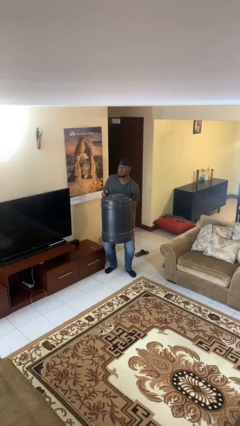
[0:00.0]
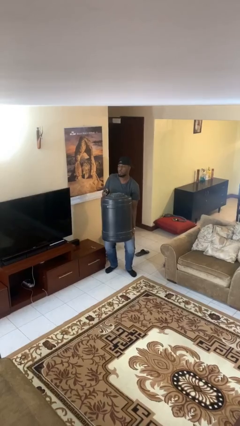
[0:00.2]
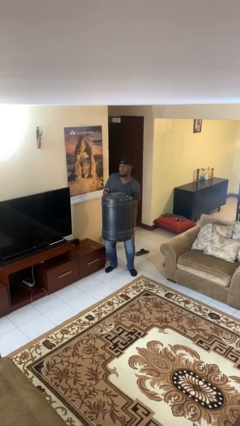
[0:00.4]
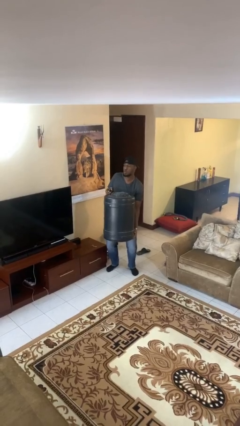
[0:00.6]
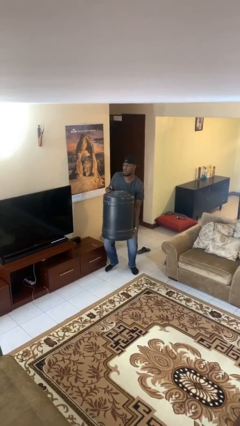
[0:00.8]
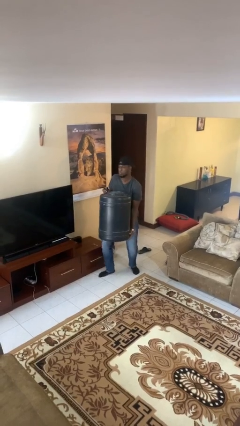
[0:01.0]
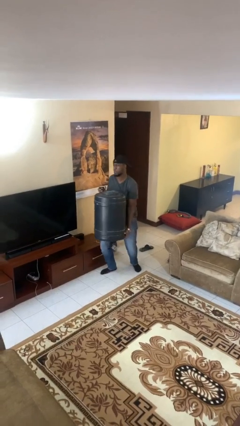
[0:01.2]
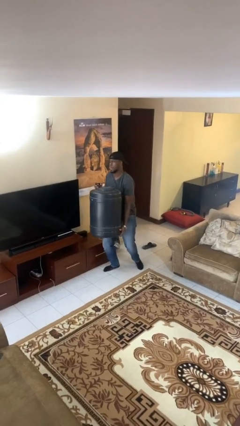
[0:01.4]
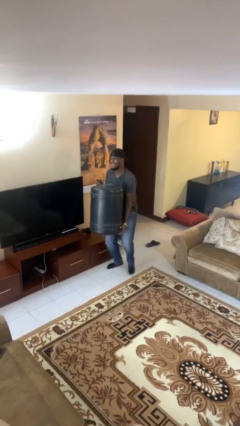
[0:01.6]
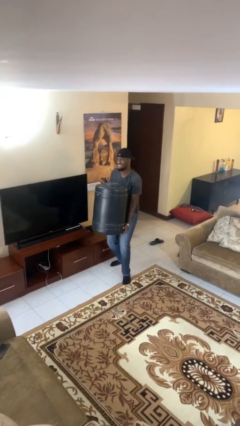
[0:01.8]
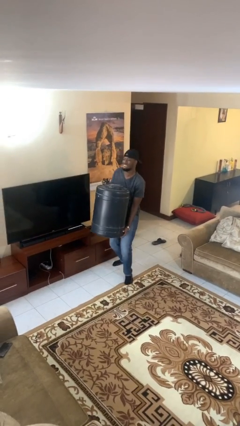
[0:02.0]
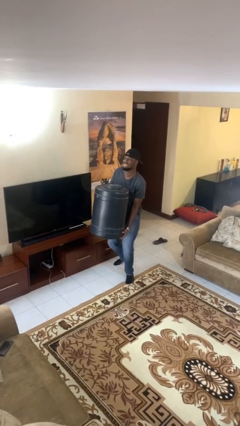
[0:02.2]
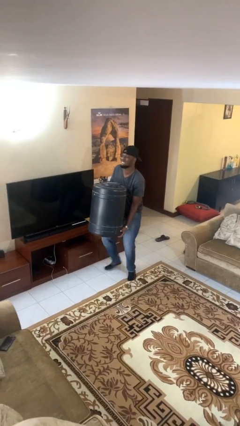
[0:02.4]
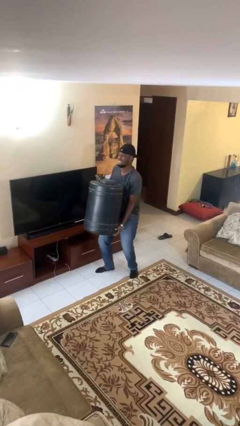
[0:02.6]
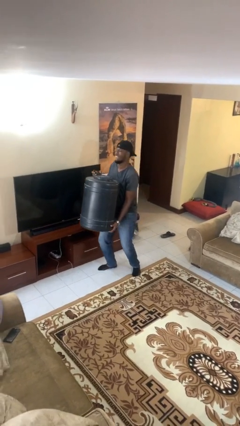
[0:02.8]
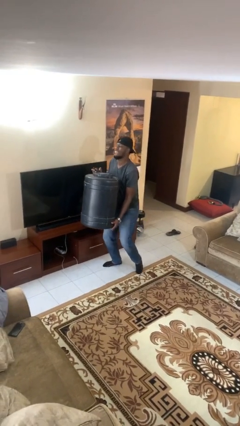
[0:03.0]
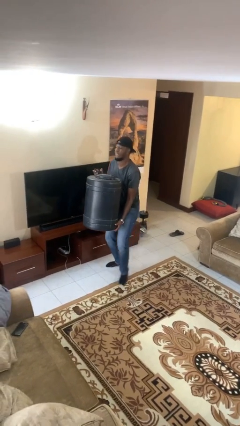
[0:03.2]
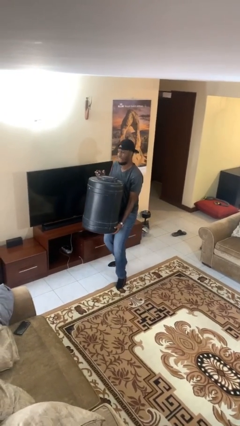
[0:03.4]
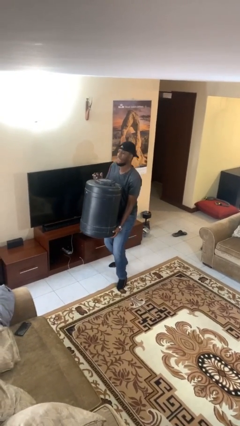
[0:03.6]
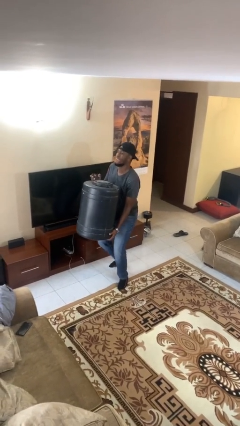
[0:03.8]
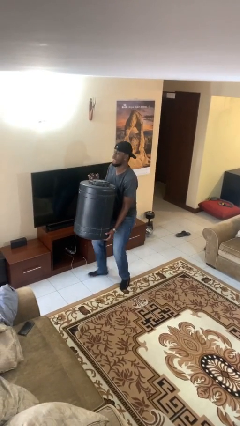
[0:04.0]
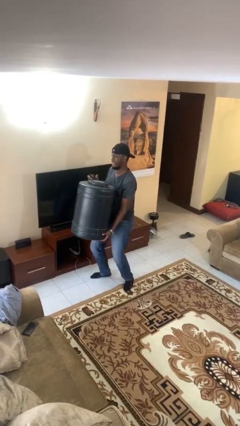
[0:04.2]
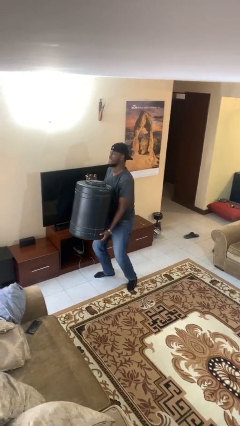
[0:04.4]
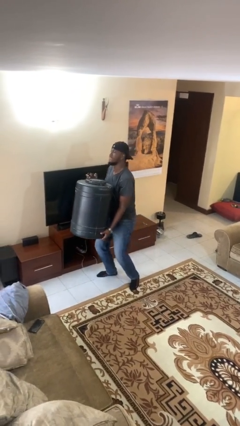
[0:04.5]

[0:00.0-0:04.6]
person carries heavy object

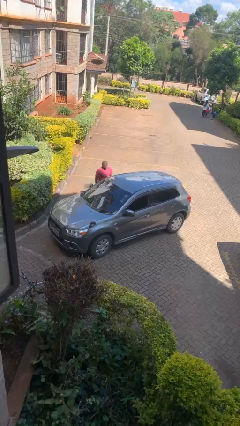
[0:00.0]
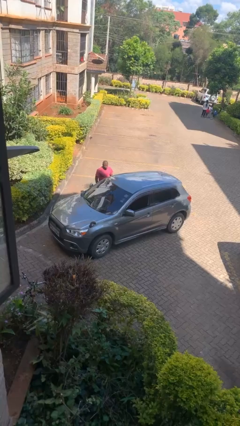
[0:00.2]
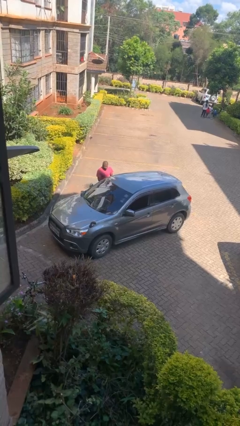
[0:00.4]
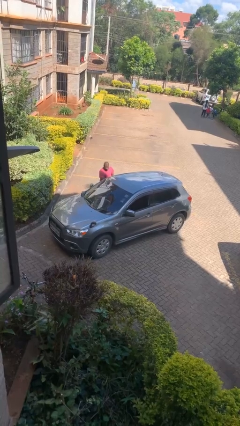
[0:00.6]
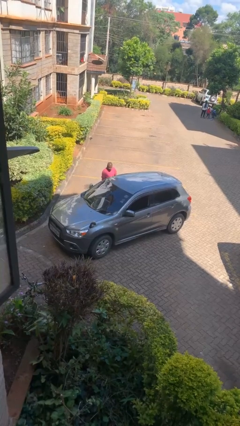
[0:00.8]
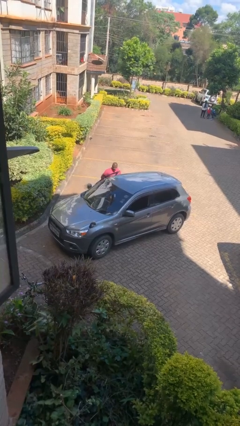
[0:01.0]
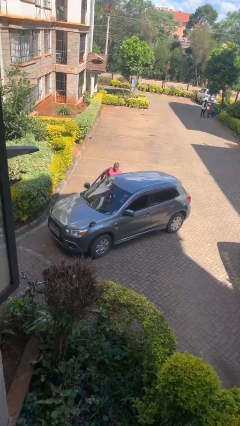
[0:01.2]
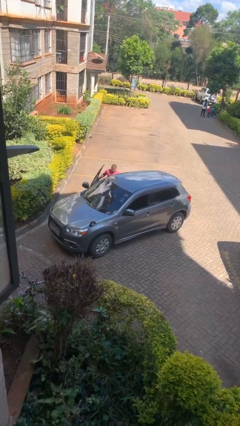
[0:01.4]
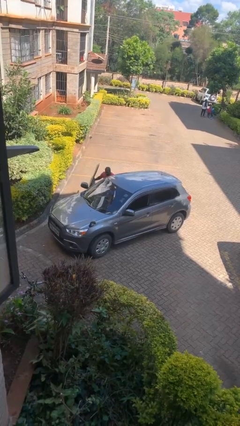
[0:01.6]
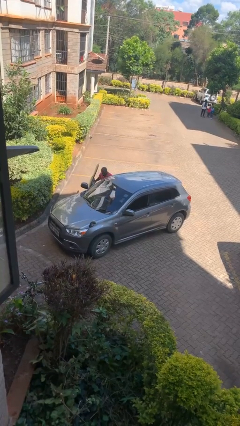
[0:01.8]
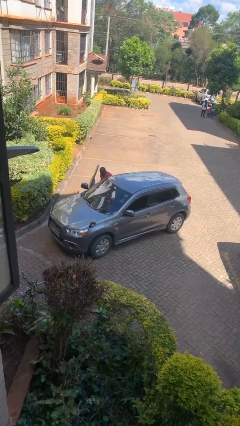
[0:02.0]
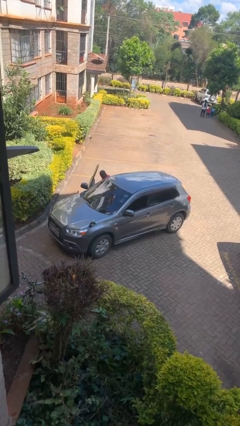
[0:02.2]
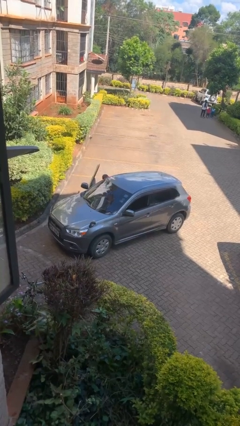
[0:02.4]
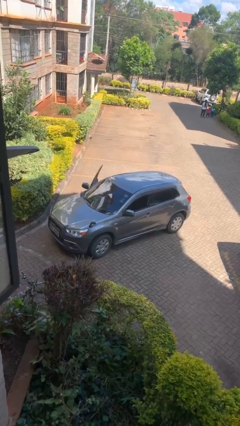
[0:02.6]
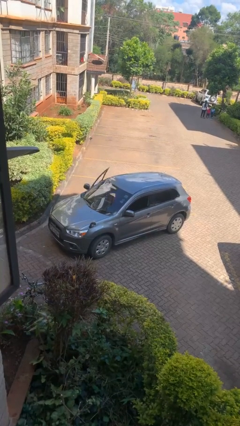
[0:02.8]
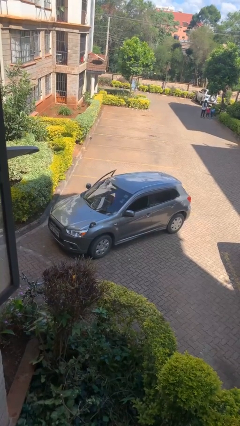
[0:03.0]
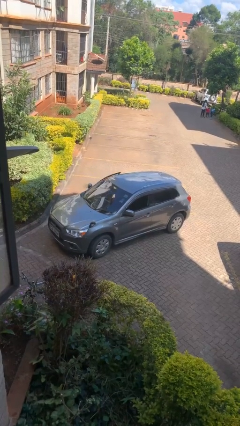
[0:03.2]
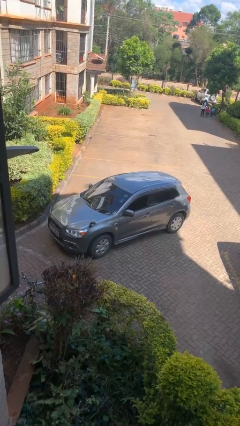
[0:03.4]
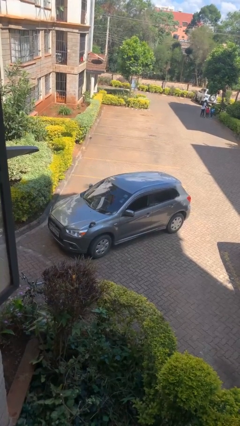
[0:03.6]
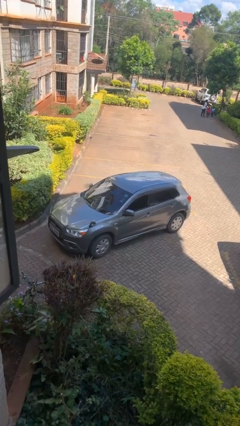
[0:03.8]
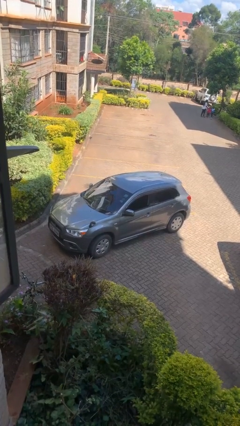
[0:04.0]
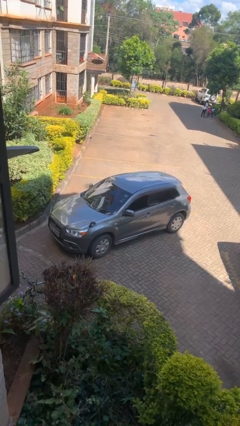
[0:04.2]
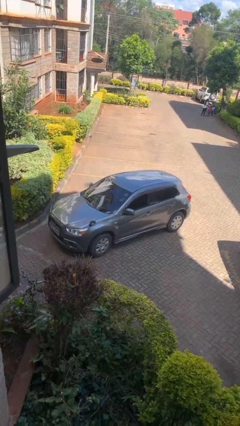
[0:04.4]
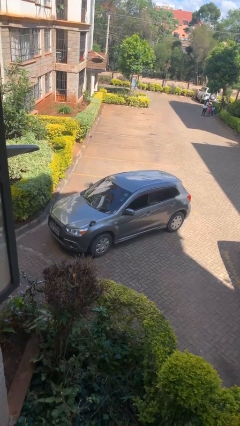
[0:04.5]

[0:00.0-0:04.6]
car picks up person

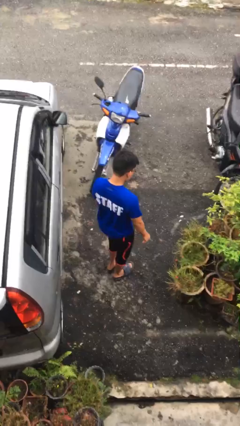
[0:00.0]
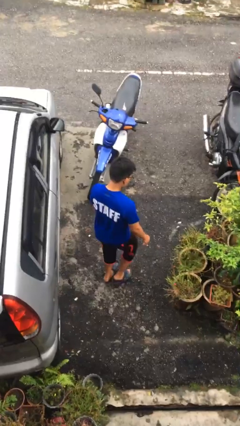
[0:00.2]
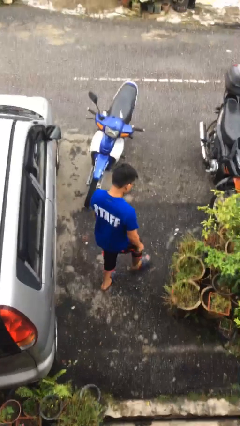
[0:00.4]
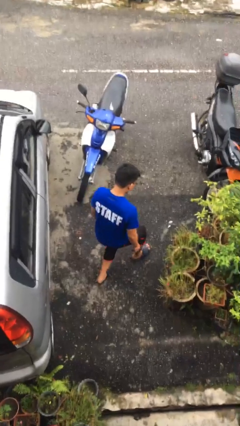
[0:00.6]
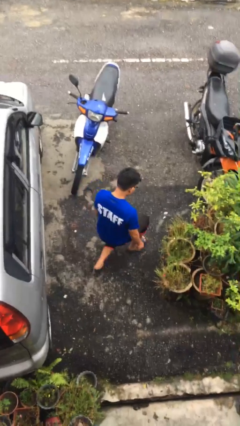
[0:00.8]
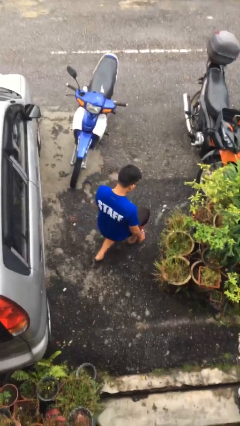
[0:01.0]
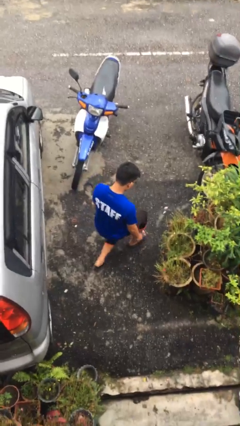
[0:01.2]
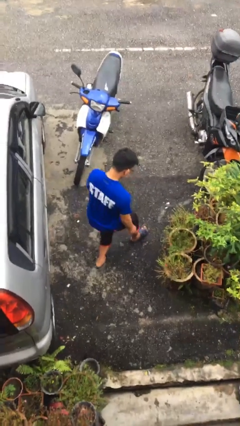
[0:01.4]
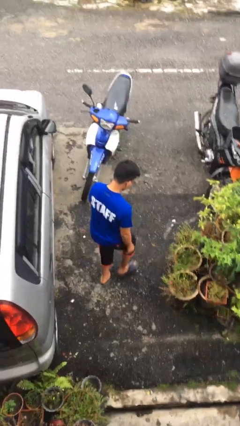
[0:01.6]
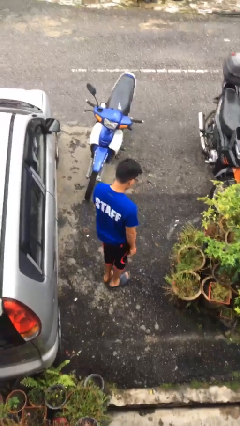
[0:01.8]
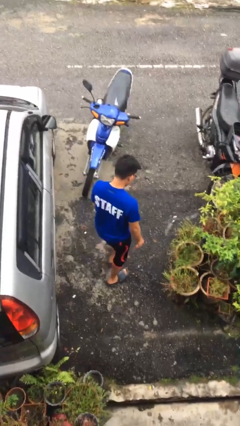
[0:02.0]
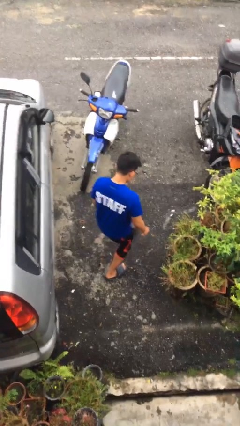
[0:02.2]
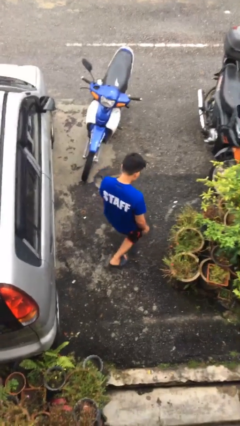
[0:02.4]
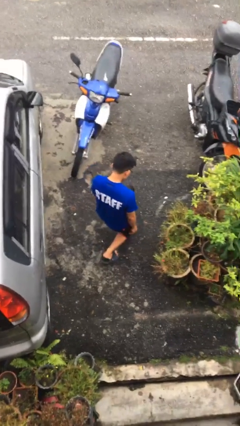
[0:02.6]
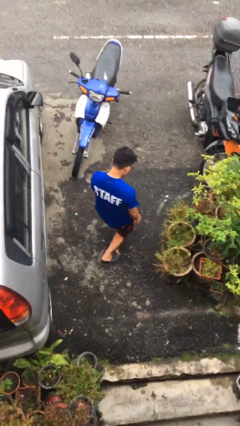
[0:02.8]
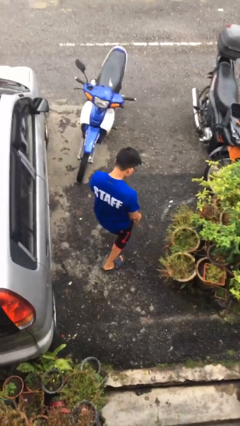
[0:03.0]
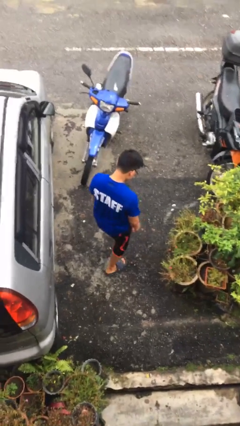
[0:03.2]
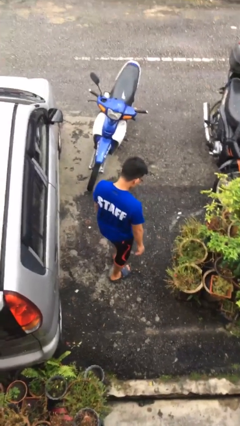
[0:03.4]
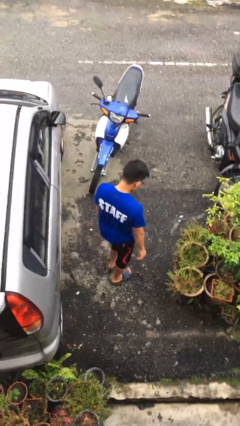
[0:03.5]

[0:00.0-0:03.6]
person exercises with lunges

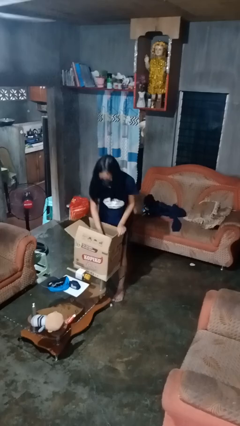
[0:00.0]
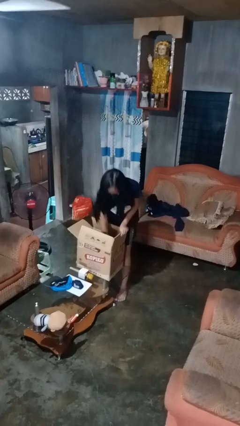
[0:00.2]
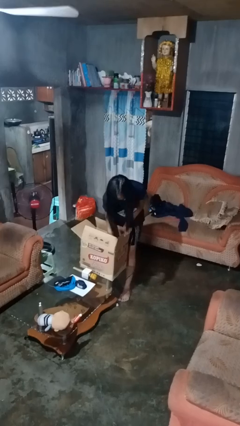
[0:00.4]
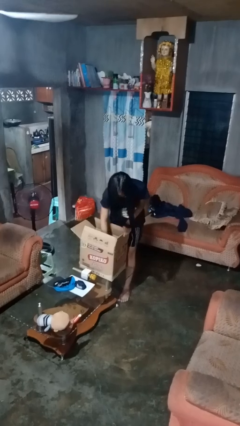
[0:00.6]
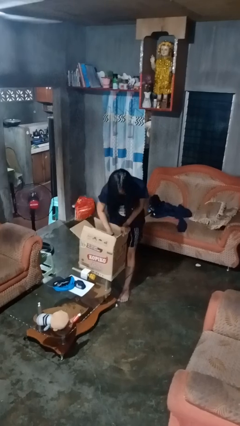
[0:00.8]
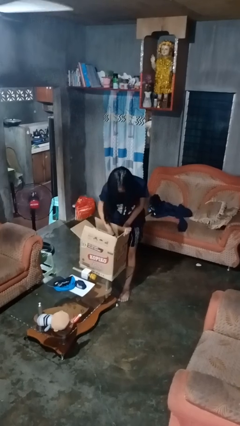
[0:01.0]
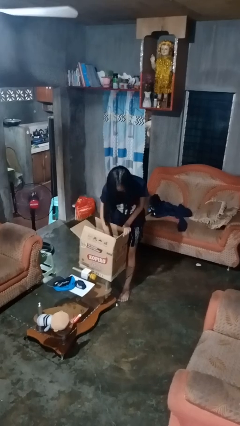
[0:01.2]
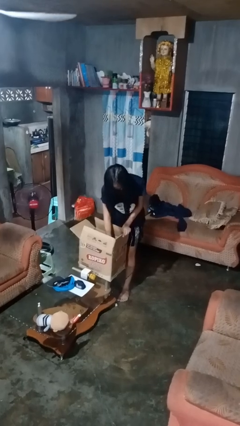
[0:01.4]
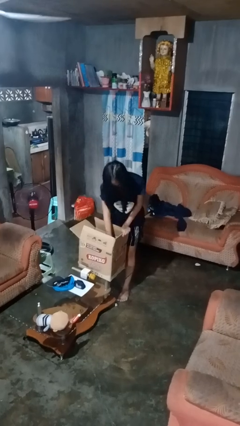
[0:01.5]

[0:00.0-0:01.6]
person searches in box

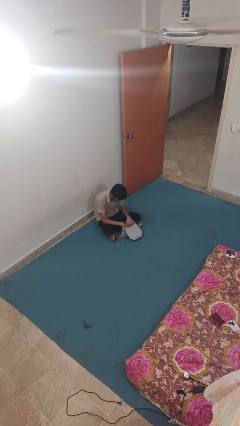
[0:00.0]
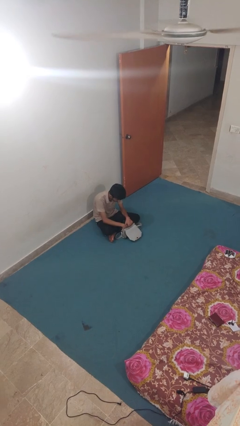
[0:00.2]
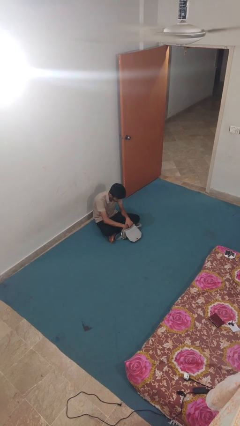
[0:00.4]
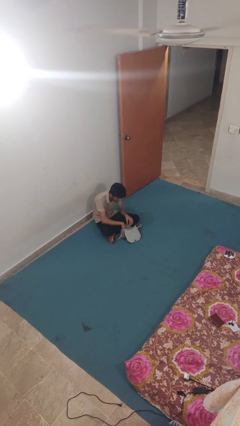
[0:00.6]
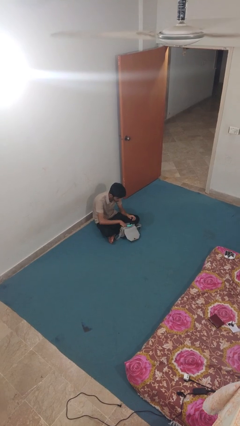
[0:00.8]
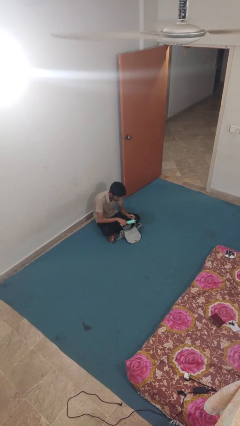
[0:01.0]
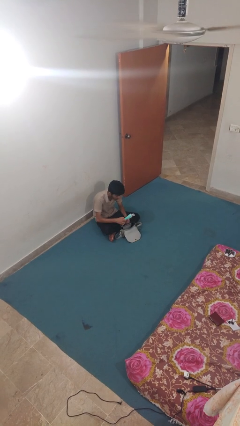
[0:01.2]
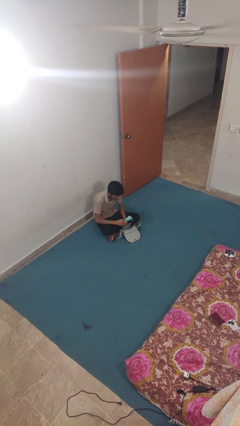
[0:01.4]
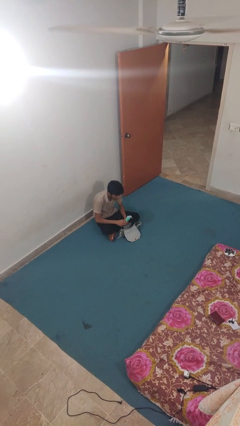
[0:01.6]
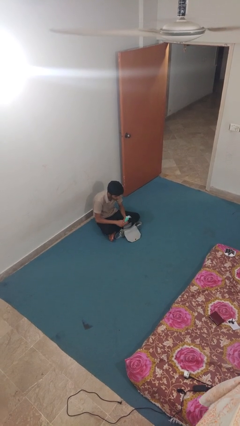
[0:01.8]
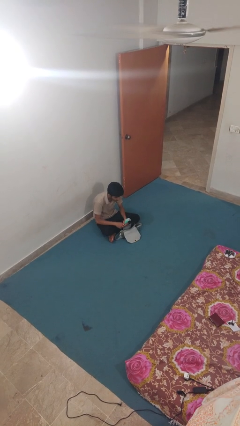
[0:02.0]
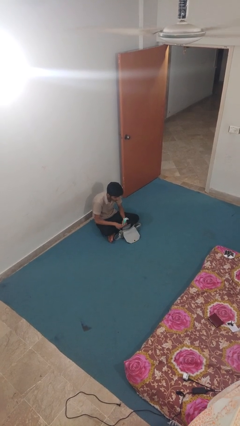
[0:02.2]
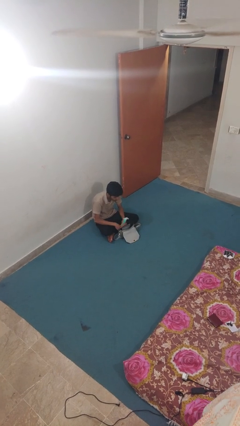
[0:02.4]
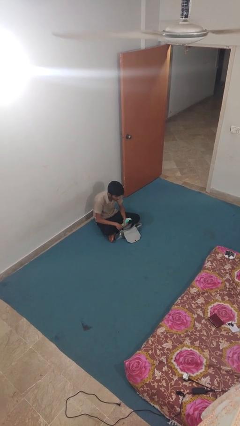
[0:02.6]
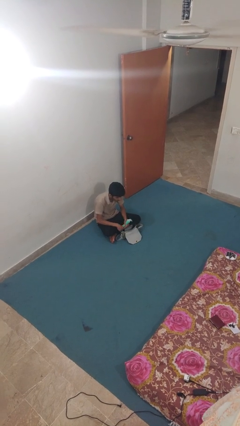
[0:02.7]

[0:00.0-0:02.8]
person takes object from purse
